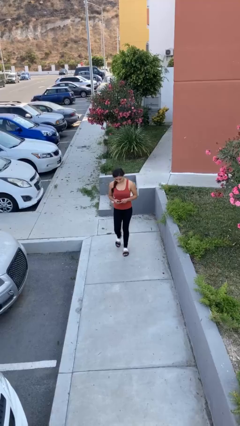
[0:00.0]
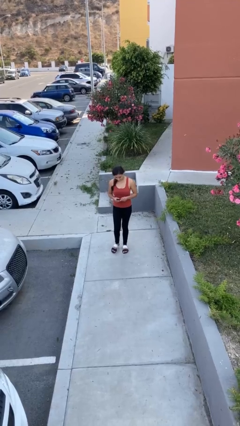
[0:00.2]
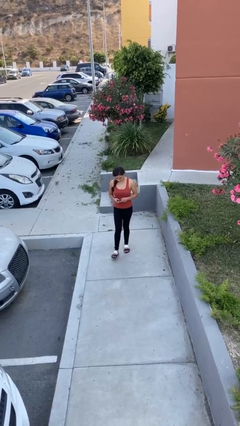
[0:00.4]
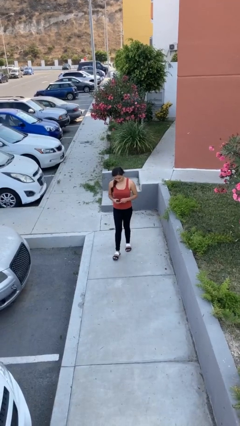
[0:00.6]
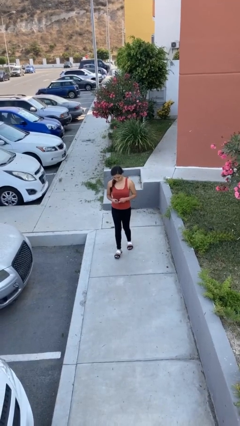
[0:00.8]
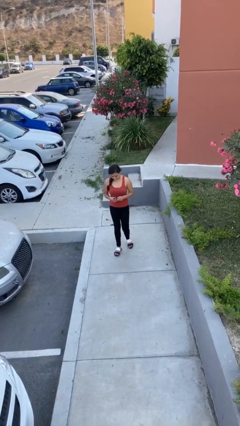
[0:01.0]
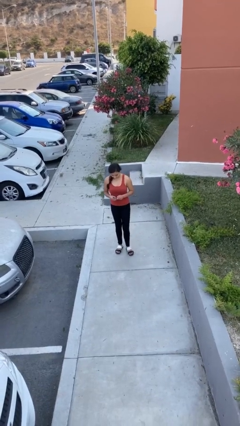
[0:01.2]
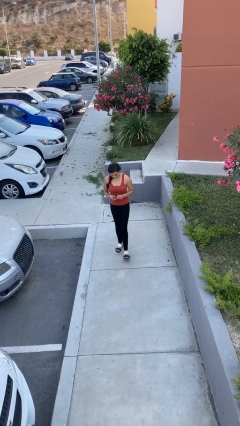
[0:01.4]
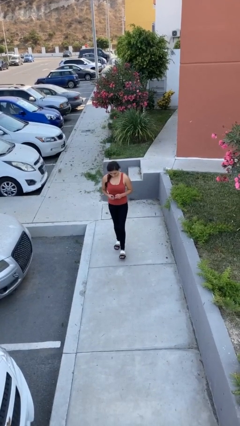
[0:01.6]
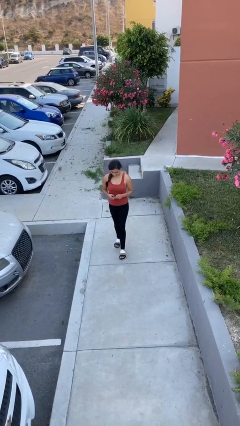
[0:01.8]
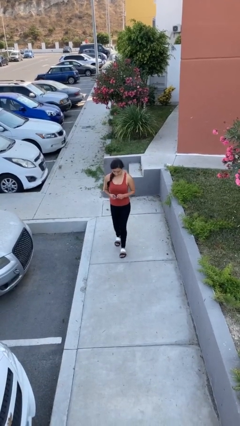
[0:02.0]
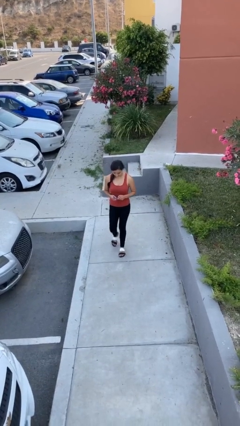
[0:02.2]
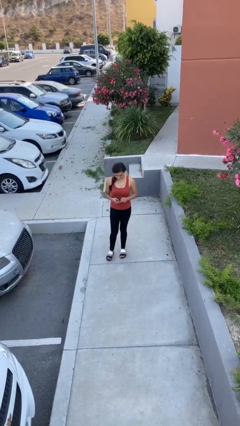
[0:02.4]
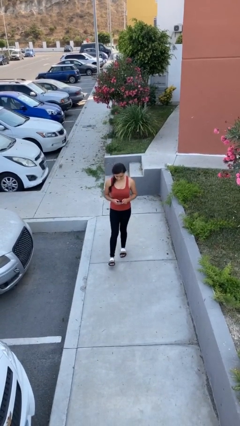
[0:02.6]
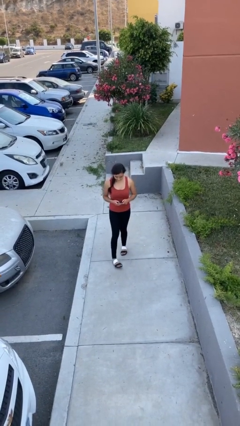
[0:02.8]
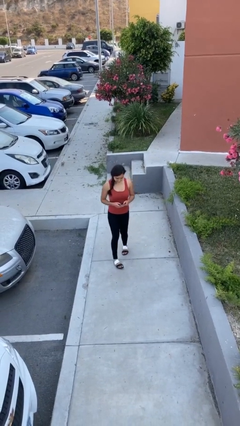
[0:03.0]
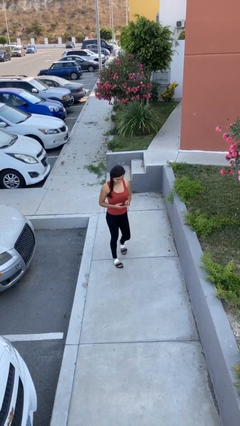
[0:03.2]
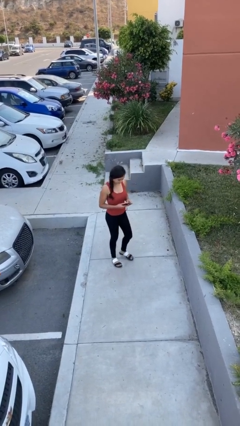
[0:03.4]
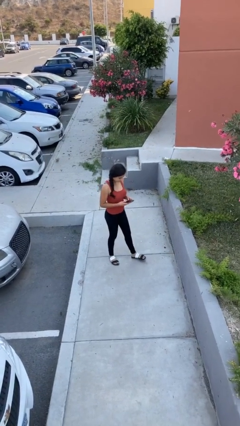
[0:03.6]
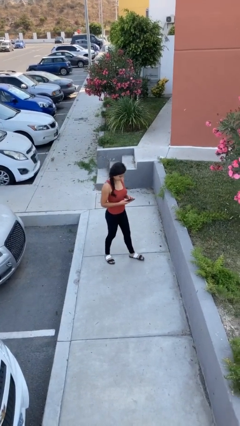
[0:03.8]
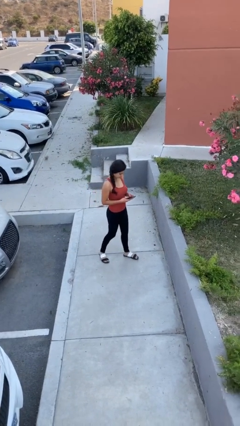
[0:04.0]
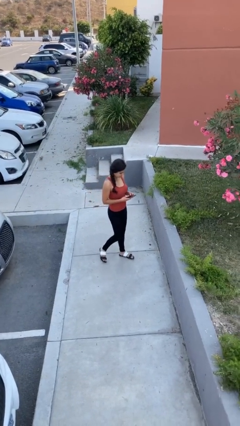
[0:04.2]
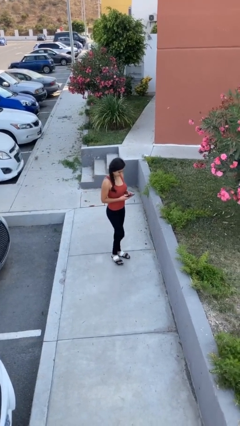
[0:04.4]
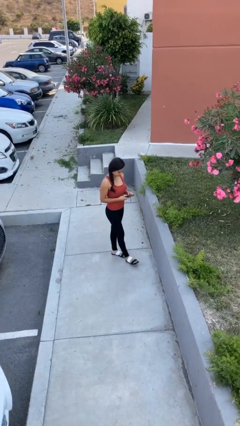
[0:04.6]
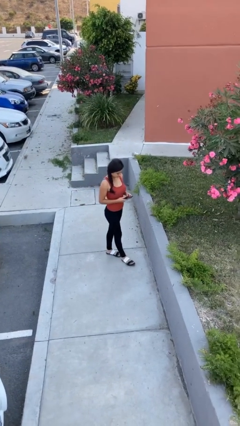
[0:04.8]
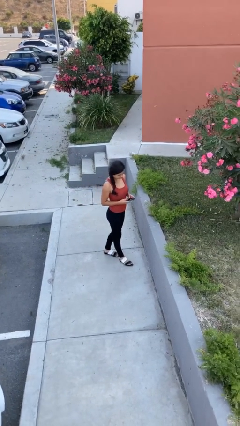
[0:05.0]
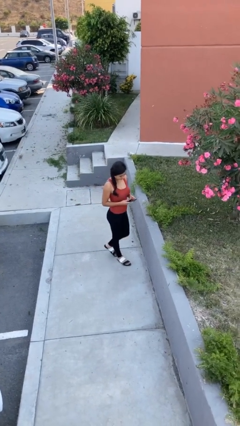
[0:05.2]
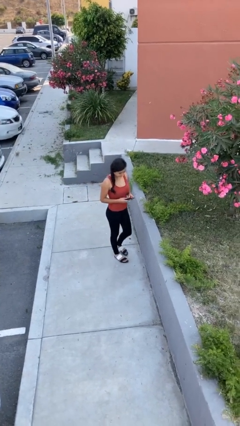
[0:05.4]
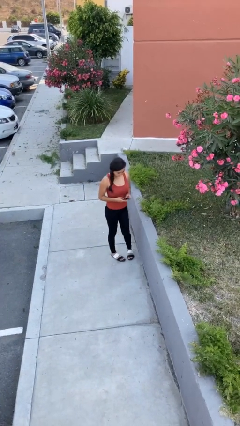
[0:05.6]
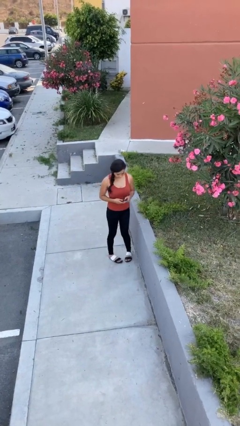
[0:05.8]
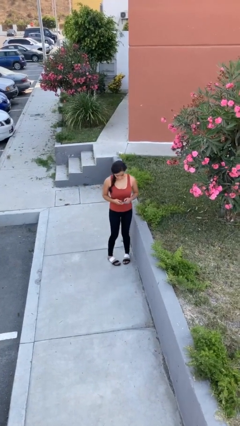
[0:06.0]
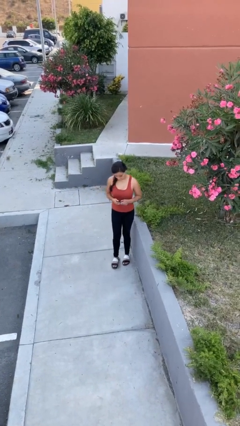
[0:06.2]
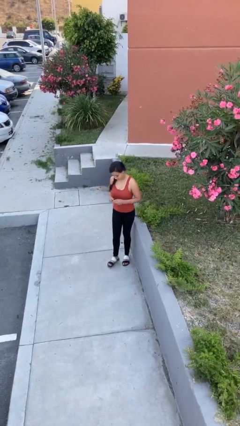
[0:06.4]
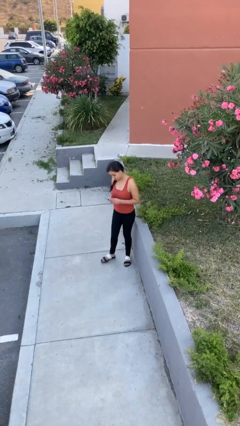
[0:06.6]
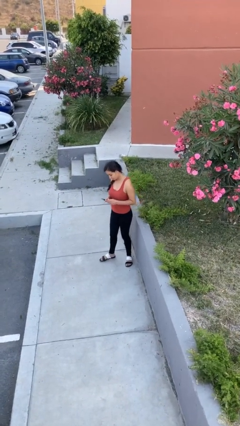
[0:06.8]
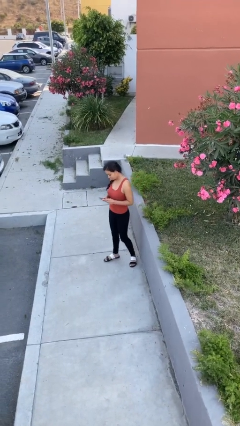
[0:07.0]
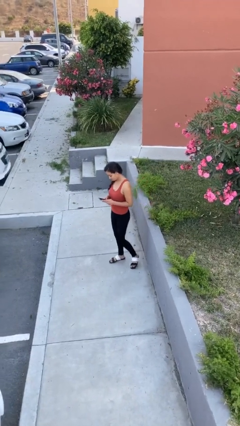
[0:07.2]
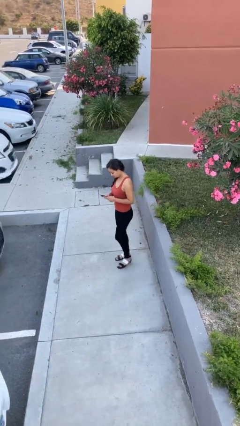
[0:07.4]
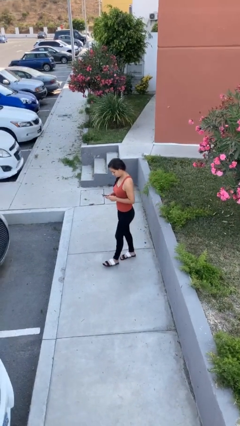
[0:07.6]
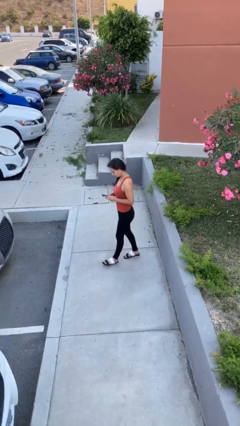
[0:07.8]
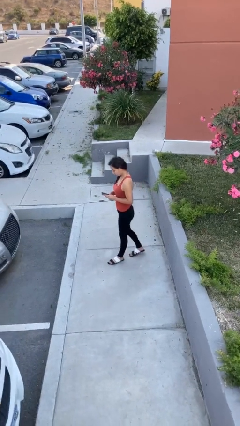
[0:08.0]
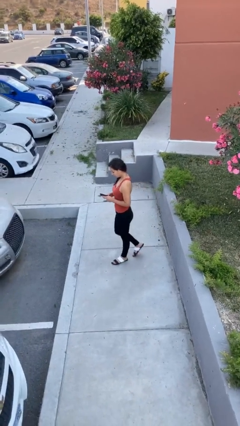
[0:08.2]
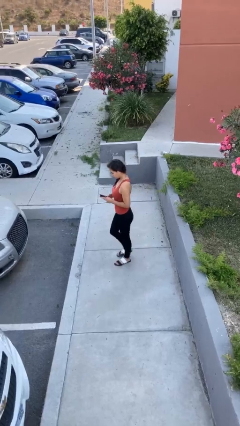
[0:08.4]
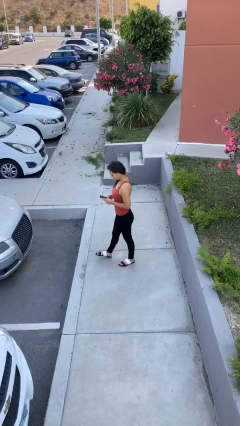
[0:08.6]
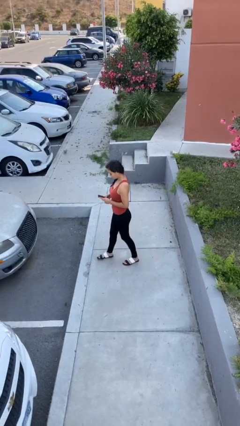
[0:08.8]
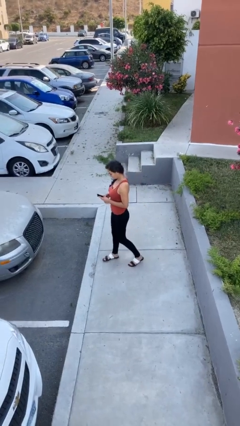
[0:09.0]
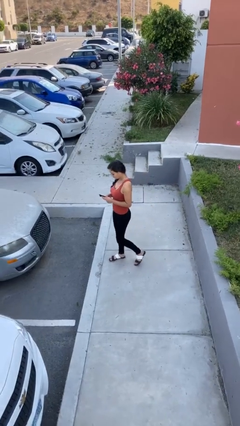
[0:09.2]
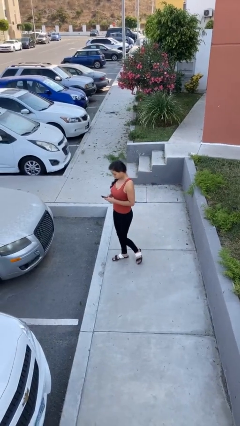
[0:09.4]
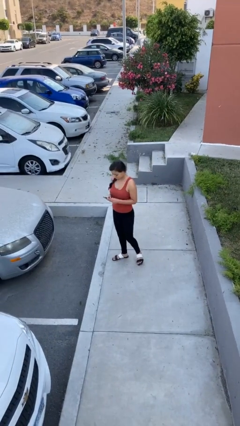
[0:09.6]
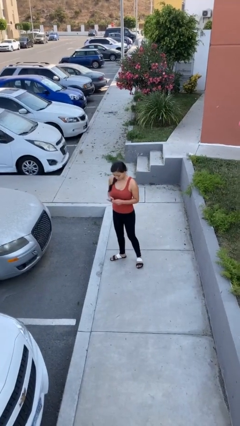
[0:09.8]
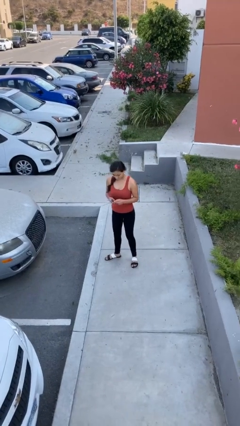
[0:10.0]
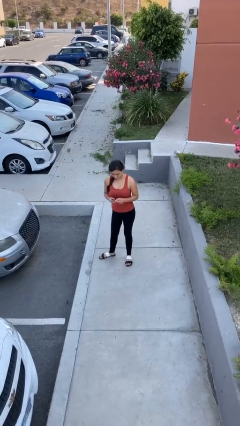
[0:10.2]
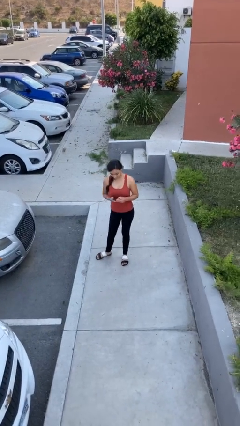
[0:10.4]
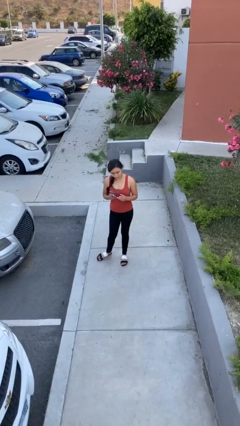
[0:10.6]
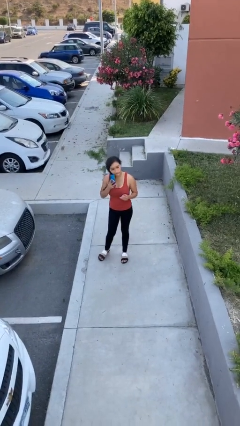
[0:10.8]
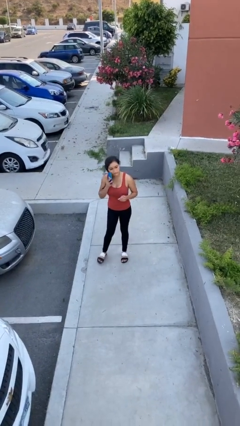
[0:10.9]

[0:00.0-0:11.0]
person texts on phone

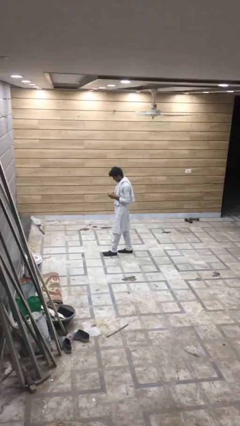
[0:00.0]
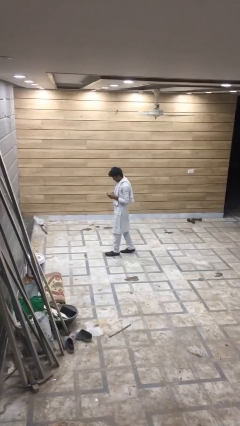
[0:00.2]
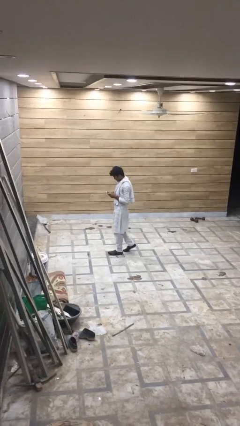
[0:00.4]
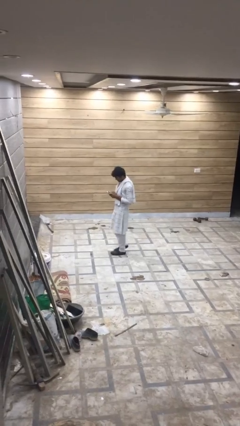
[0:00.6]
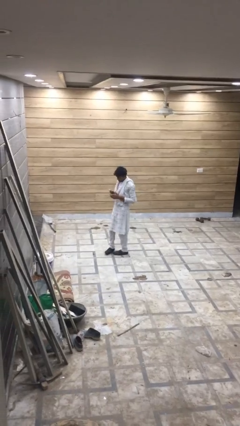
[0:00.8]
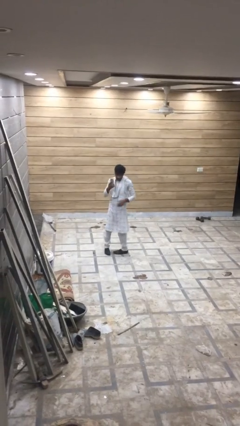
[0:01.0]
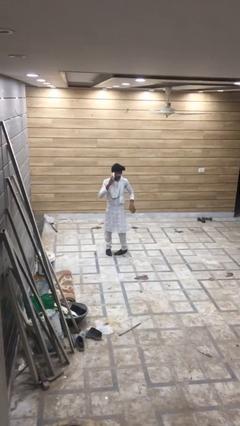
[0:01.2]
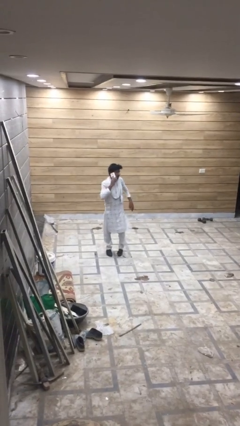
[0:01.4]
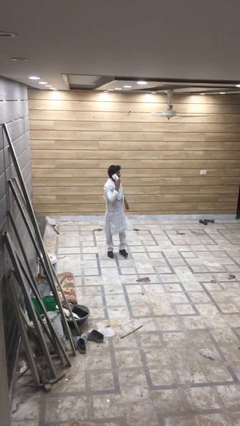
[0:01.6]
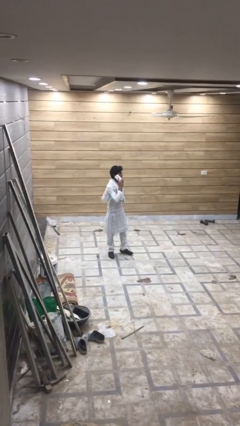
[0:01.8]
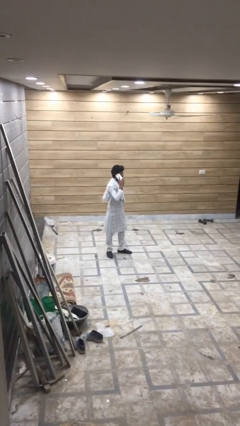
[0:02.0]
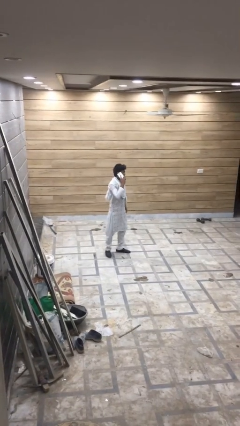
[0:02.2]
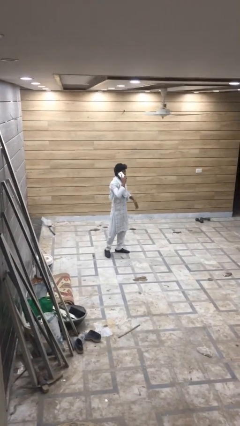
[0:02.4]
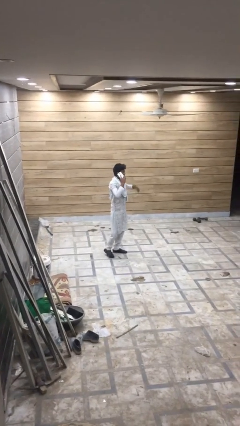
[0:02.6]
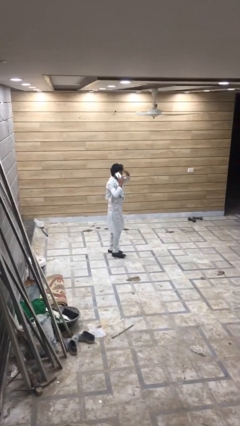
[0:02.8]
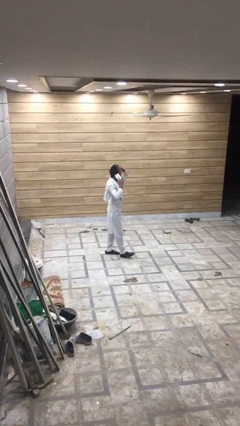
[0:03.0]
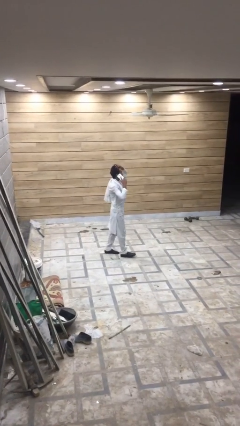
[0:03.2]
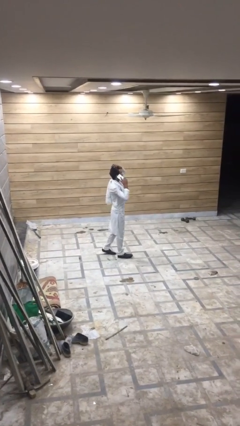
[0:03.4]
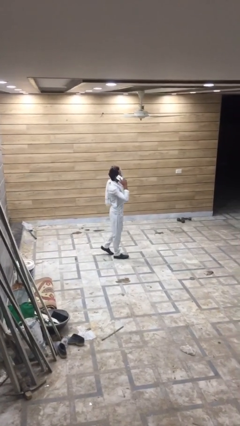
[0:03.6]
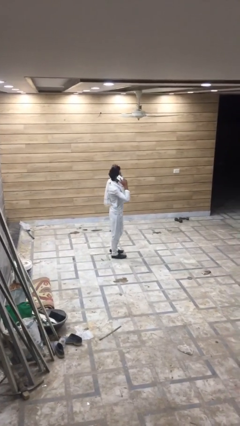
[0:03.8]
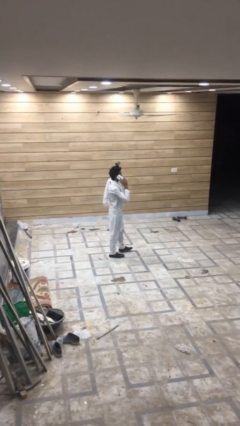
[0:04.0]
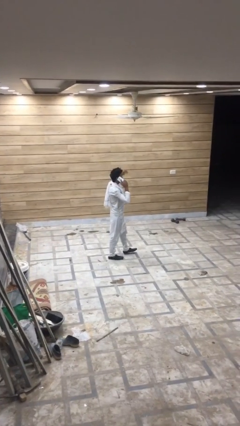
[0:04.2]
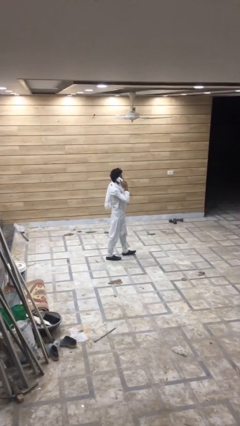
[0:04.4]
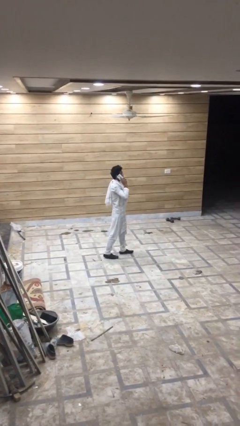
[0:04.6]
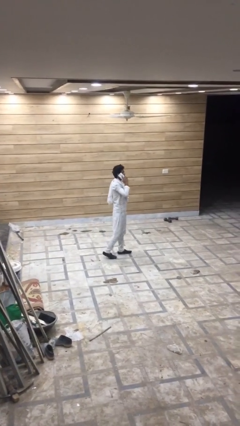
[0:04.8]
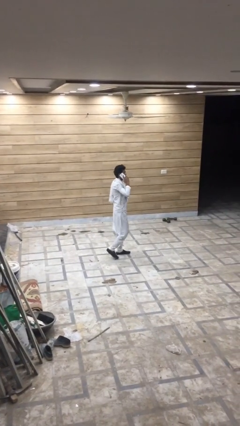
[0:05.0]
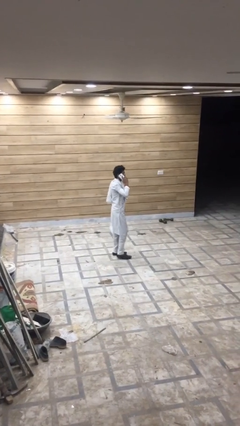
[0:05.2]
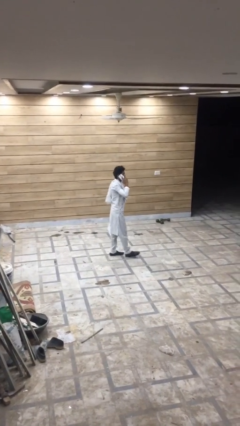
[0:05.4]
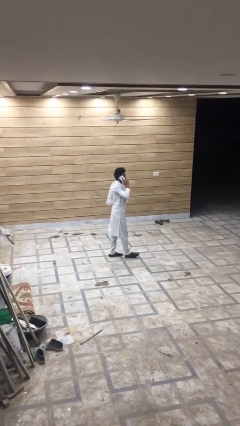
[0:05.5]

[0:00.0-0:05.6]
person talks on phone

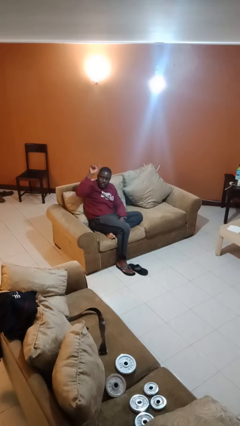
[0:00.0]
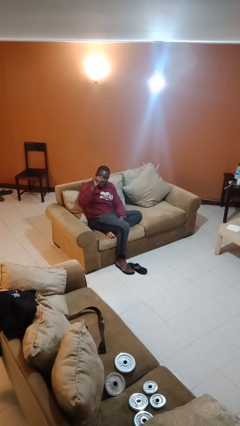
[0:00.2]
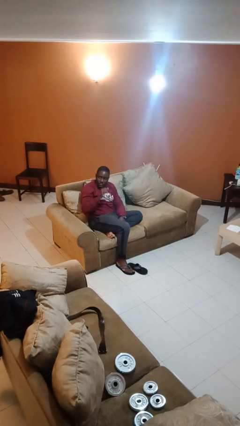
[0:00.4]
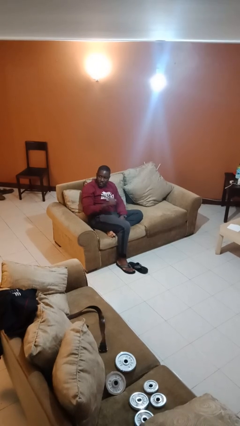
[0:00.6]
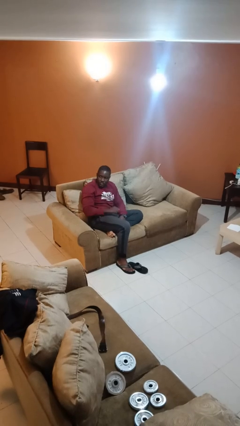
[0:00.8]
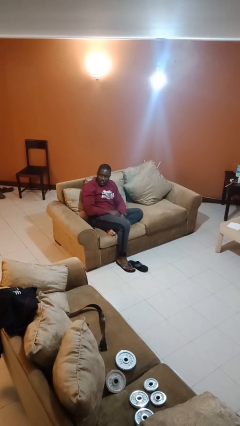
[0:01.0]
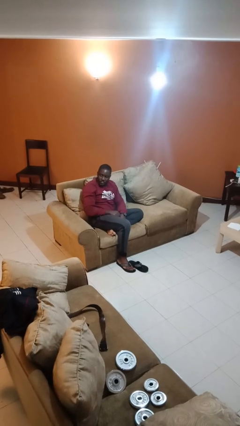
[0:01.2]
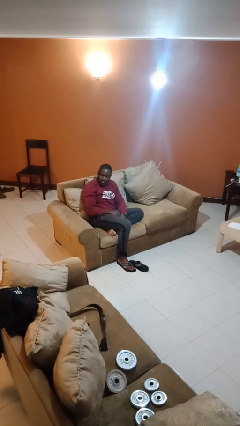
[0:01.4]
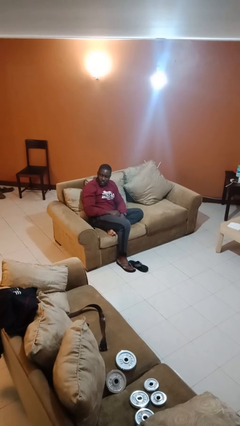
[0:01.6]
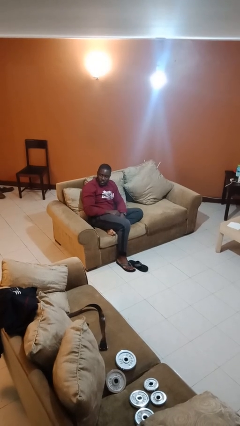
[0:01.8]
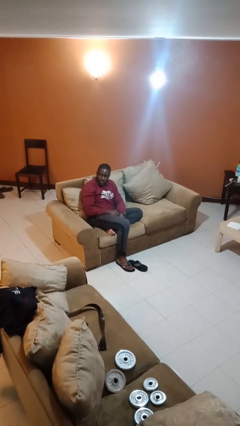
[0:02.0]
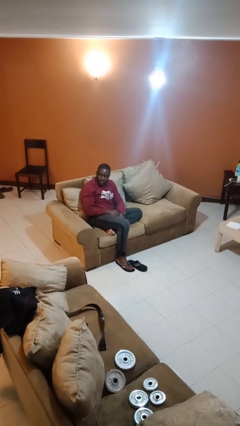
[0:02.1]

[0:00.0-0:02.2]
person gestures lower hand
